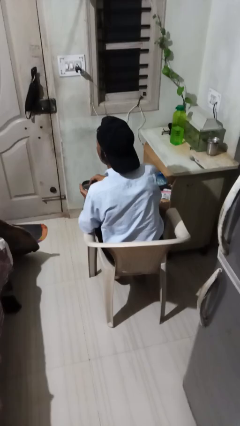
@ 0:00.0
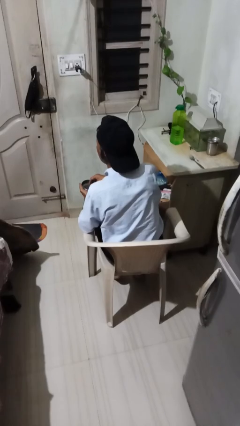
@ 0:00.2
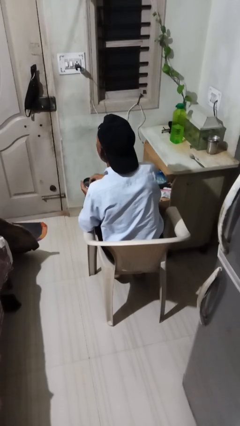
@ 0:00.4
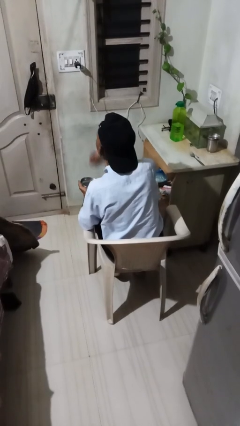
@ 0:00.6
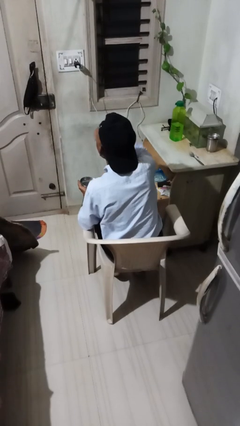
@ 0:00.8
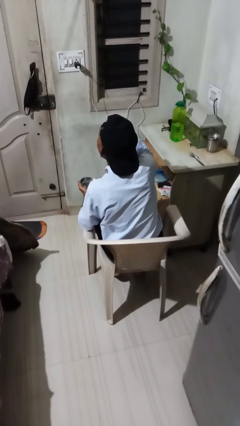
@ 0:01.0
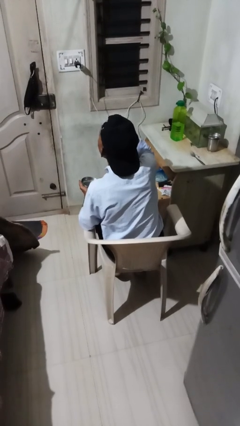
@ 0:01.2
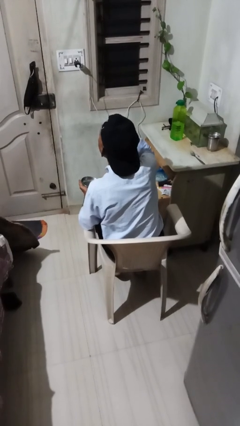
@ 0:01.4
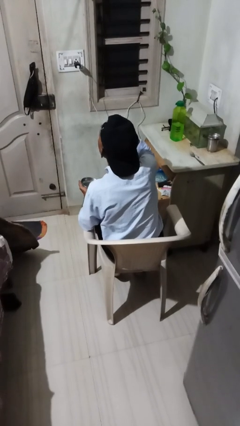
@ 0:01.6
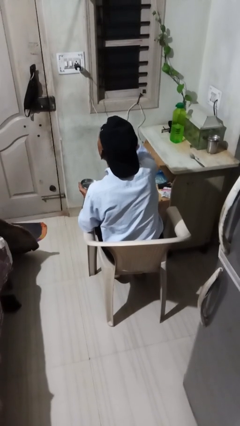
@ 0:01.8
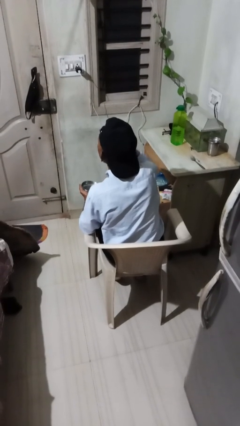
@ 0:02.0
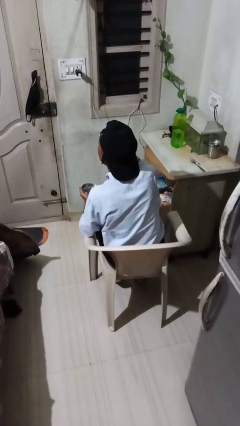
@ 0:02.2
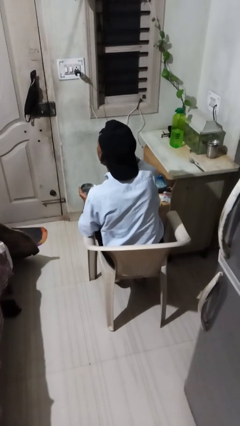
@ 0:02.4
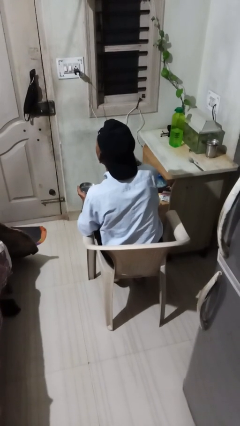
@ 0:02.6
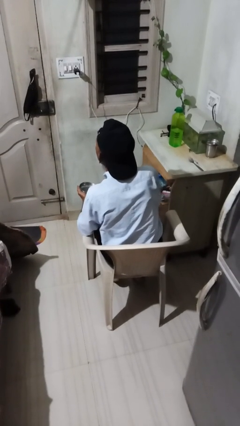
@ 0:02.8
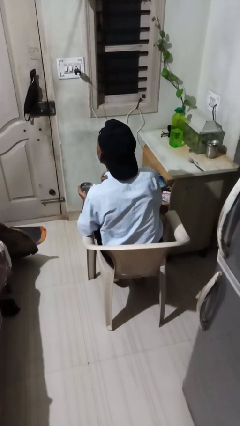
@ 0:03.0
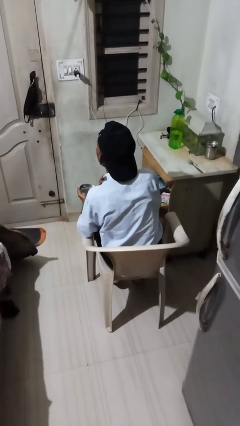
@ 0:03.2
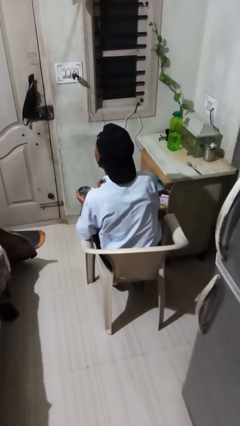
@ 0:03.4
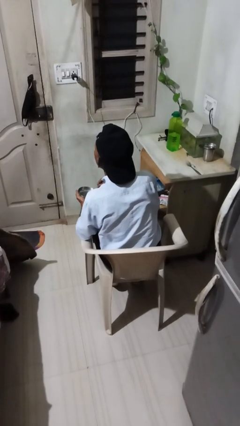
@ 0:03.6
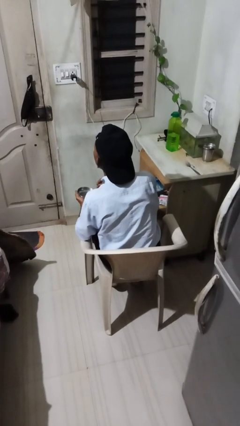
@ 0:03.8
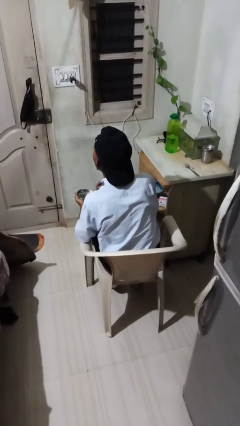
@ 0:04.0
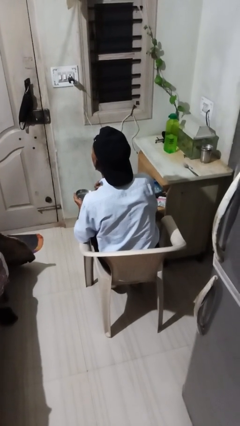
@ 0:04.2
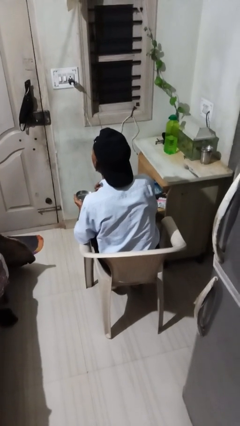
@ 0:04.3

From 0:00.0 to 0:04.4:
person eats with hands

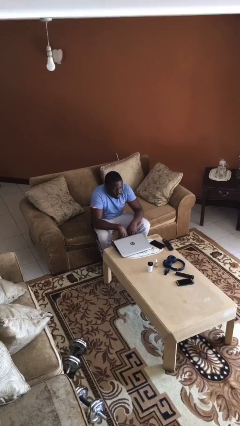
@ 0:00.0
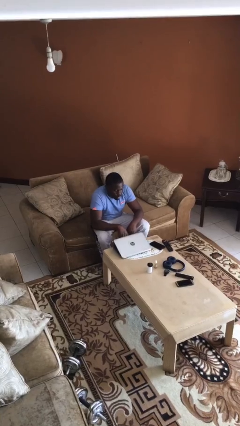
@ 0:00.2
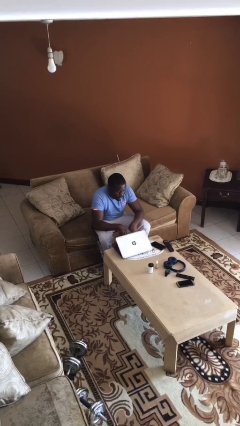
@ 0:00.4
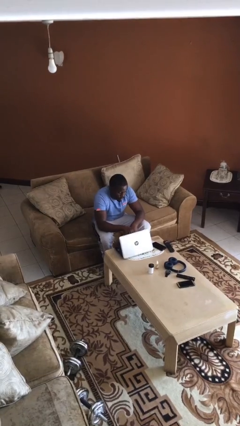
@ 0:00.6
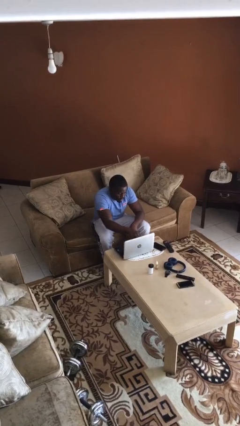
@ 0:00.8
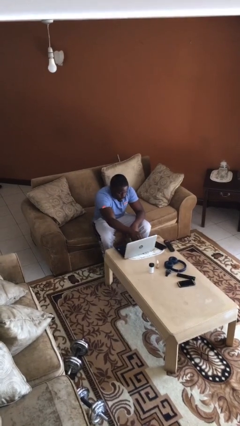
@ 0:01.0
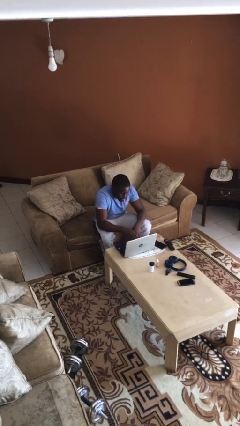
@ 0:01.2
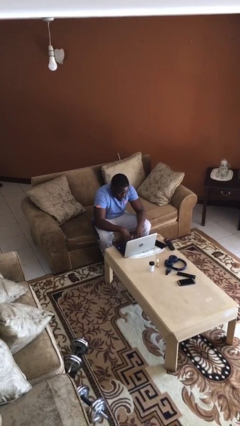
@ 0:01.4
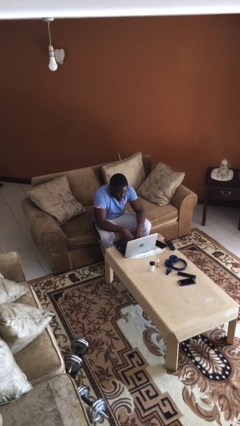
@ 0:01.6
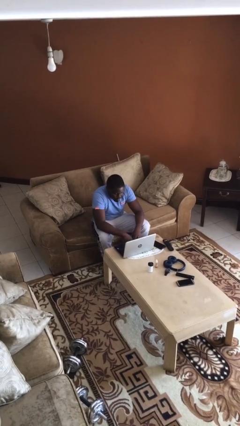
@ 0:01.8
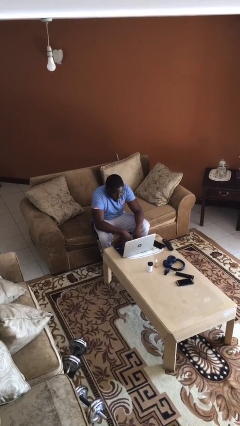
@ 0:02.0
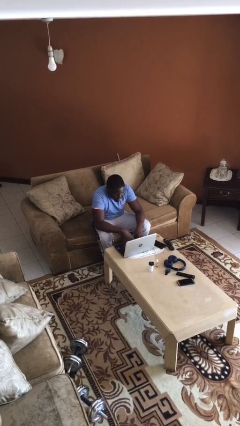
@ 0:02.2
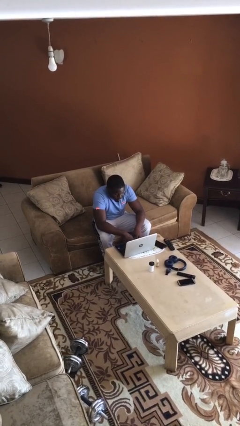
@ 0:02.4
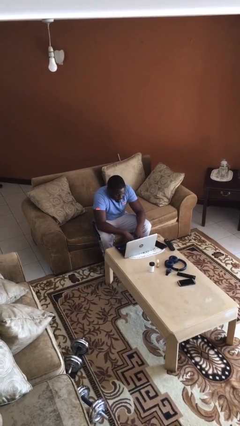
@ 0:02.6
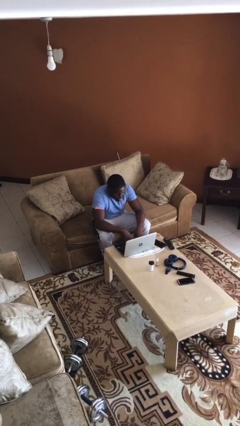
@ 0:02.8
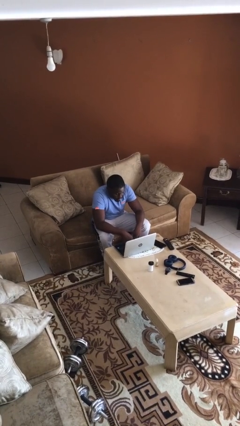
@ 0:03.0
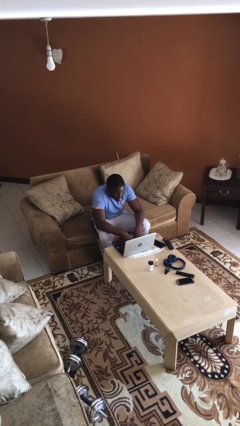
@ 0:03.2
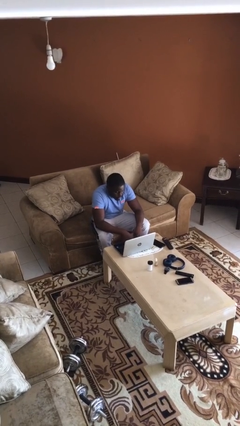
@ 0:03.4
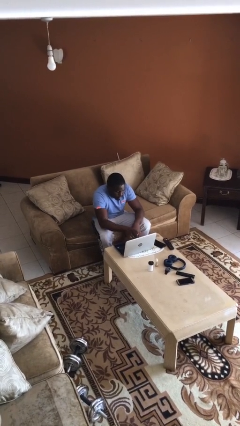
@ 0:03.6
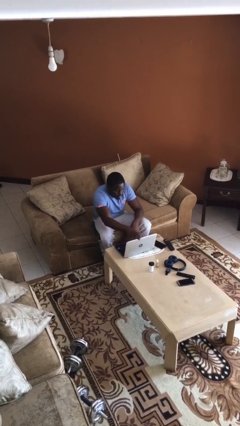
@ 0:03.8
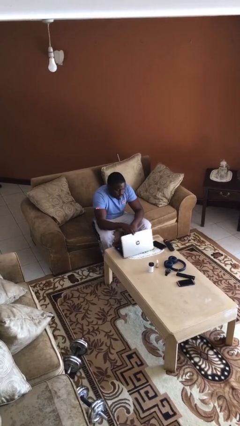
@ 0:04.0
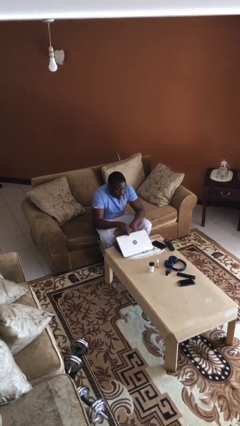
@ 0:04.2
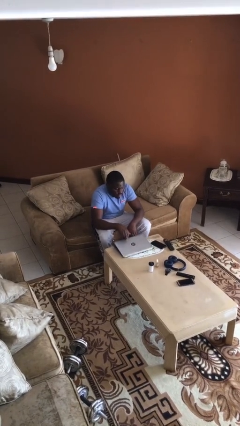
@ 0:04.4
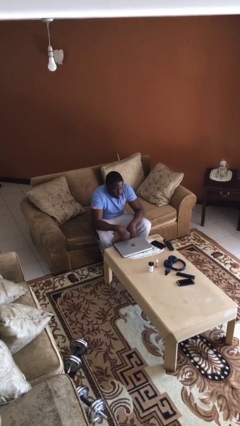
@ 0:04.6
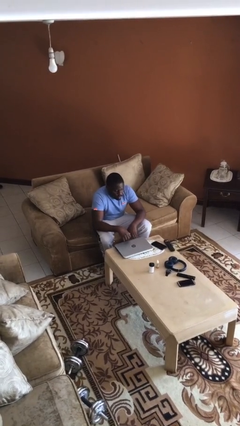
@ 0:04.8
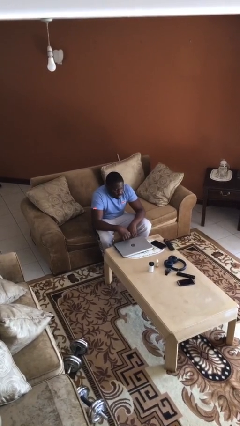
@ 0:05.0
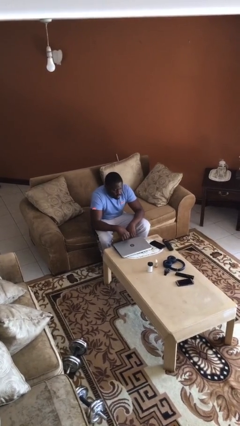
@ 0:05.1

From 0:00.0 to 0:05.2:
person interacts with laptop

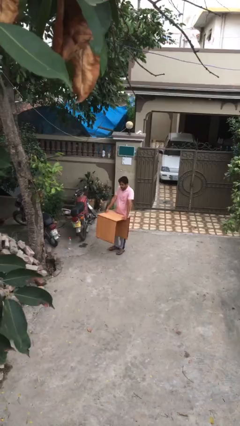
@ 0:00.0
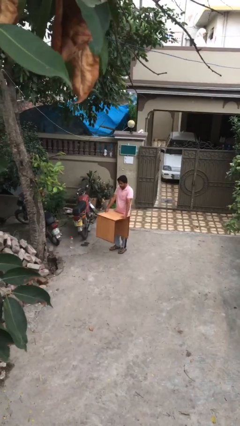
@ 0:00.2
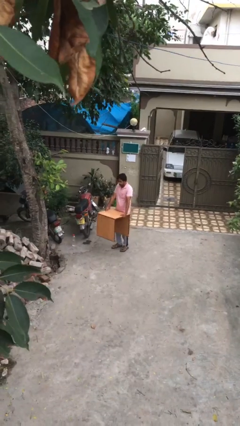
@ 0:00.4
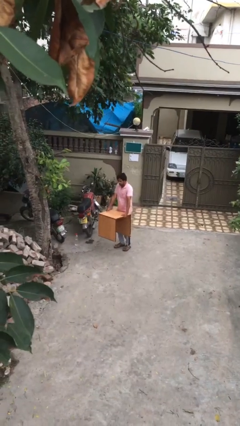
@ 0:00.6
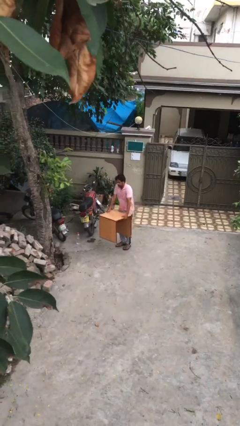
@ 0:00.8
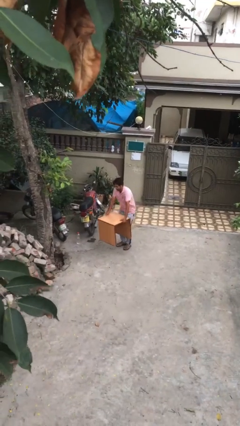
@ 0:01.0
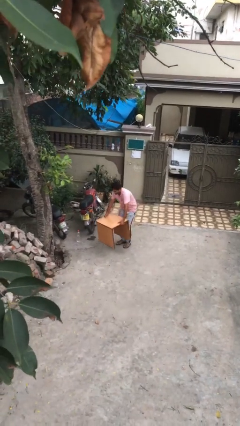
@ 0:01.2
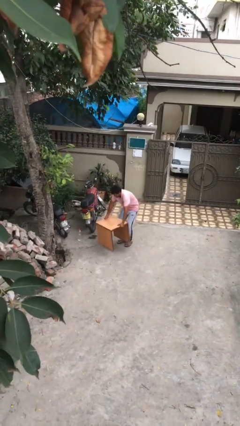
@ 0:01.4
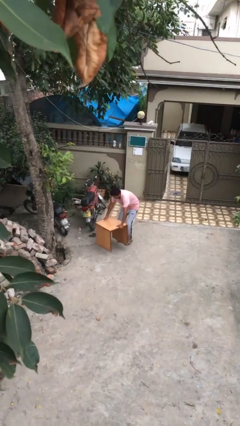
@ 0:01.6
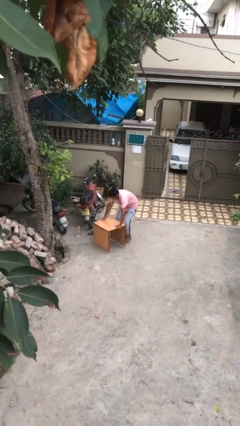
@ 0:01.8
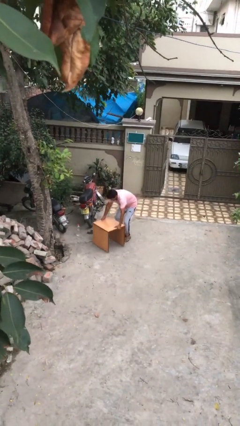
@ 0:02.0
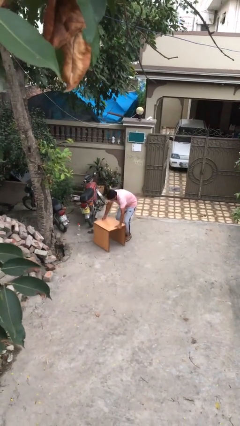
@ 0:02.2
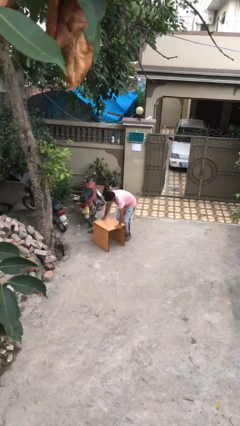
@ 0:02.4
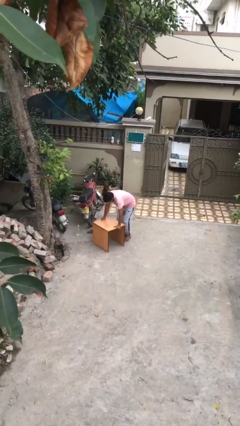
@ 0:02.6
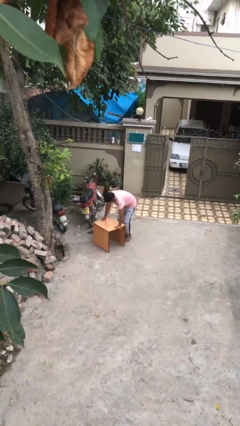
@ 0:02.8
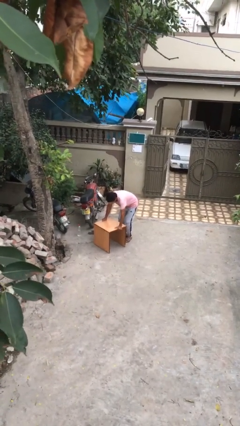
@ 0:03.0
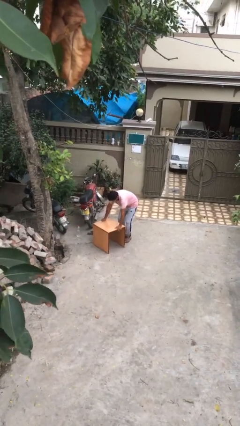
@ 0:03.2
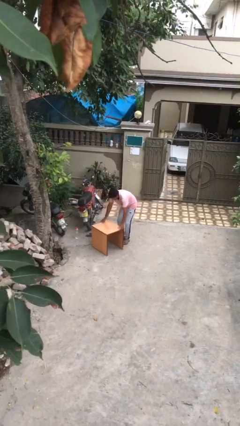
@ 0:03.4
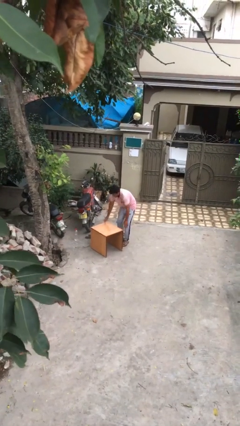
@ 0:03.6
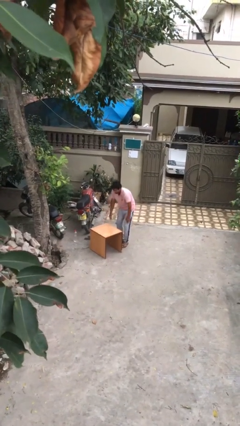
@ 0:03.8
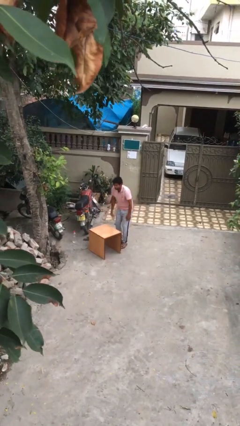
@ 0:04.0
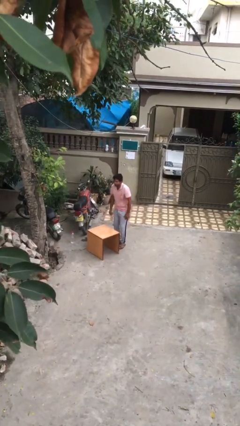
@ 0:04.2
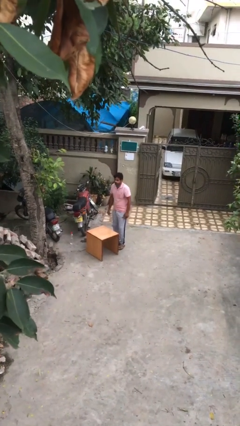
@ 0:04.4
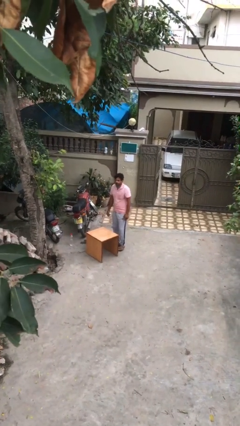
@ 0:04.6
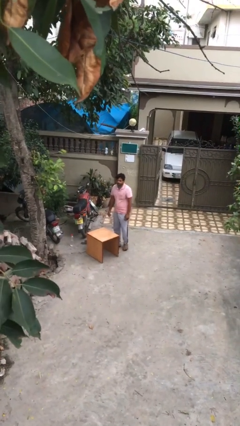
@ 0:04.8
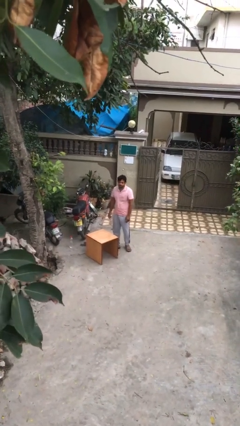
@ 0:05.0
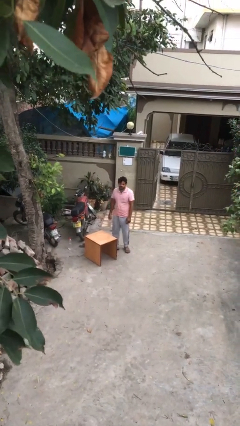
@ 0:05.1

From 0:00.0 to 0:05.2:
person puts down object on floor

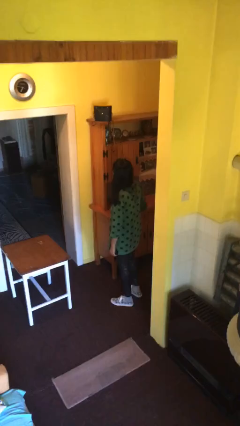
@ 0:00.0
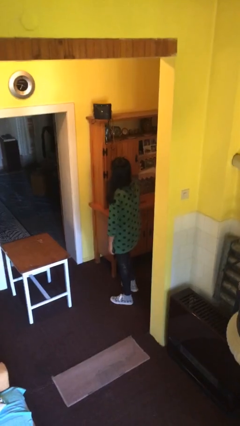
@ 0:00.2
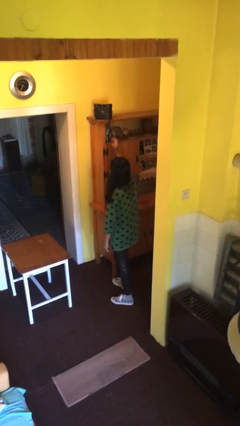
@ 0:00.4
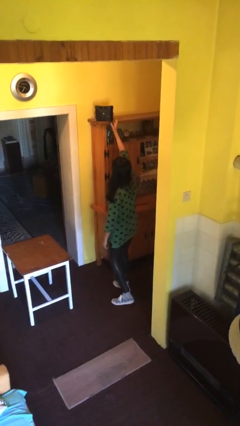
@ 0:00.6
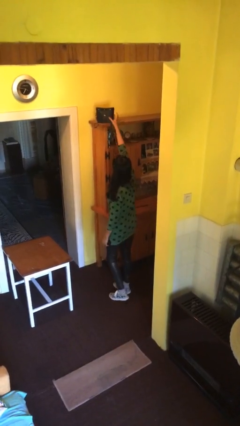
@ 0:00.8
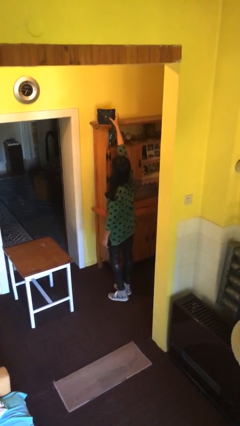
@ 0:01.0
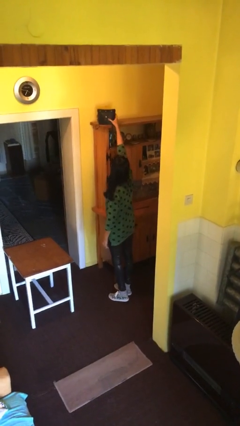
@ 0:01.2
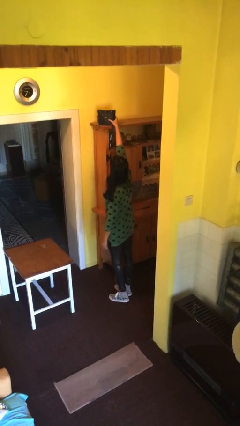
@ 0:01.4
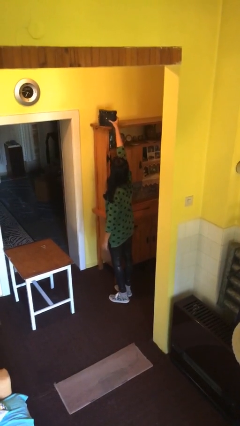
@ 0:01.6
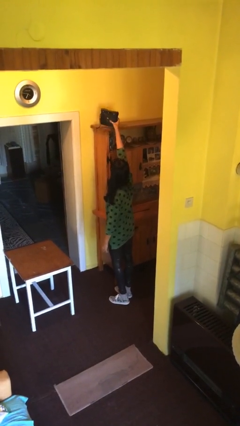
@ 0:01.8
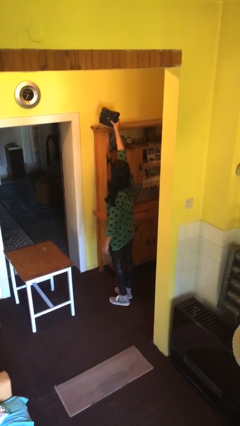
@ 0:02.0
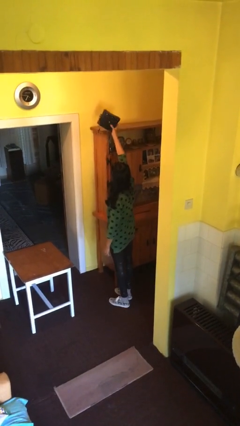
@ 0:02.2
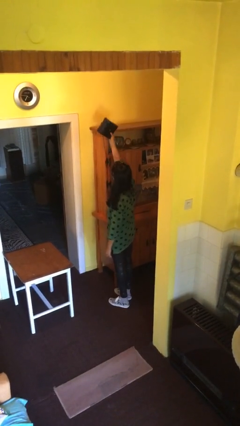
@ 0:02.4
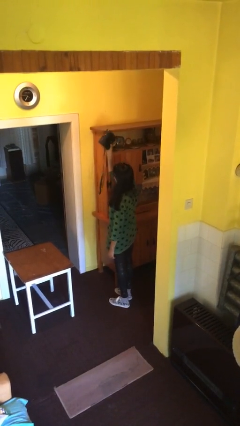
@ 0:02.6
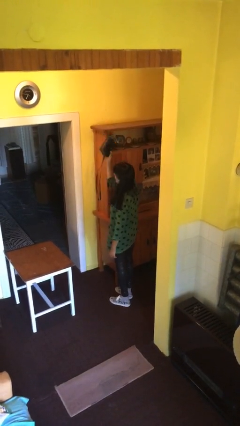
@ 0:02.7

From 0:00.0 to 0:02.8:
person picks up object from shelf
